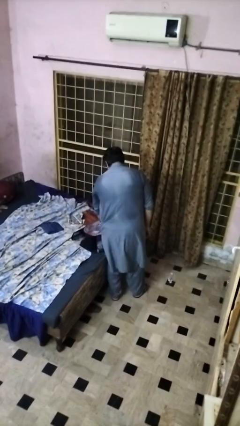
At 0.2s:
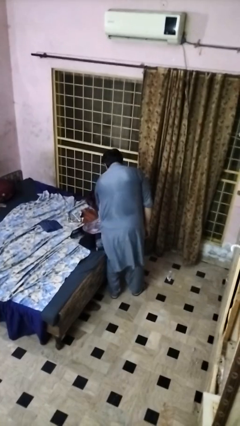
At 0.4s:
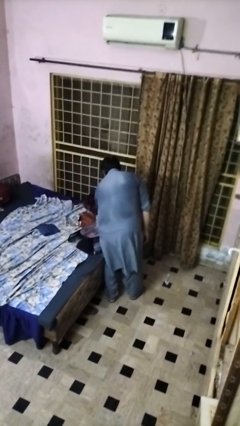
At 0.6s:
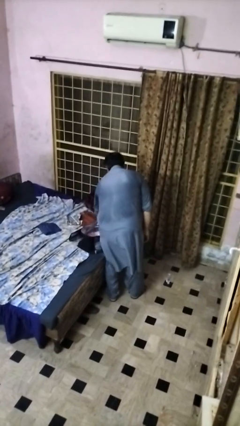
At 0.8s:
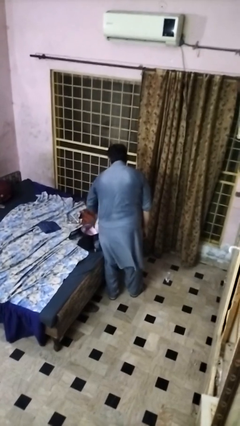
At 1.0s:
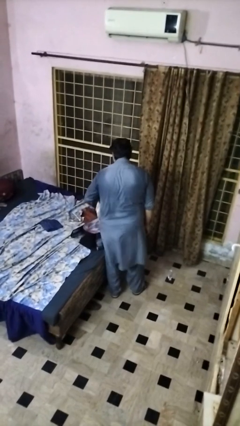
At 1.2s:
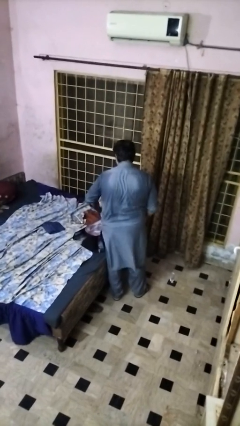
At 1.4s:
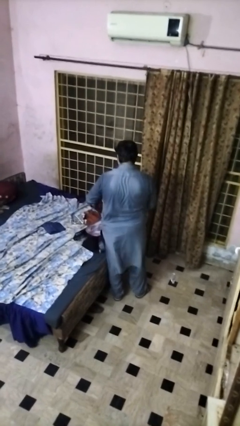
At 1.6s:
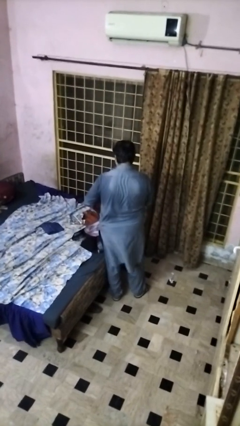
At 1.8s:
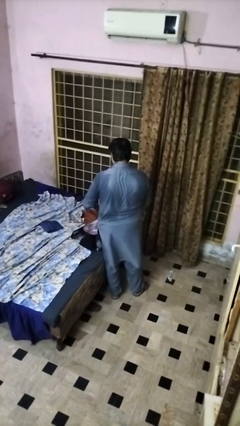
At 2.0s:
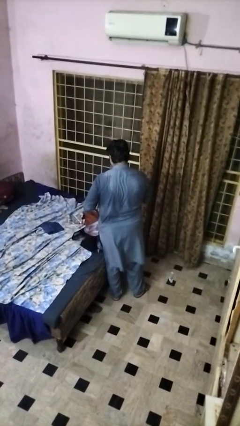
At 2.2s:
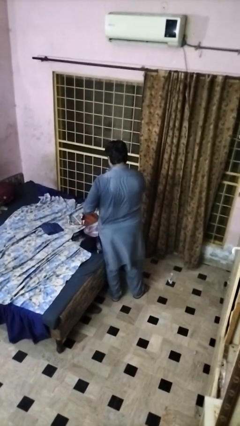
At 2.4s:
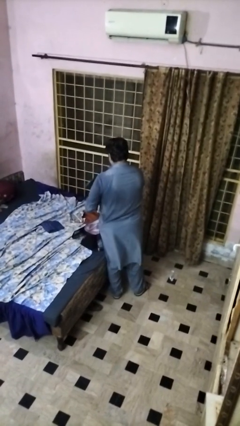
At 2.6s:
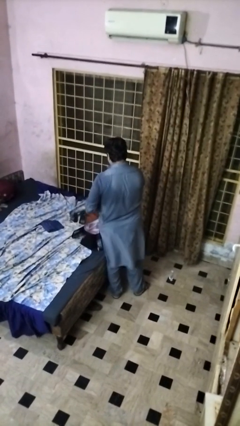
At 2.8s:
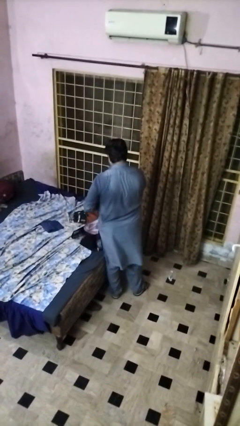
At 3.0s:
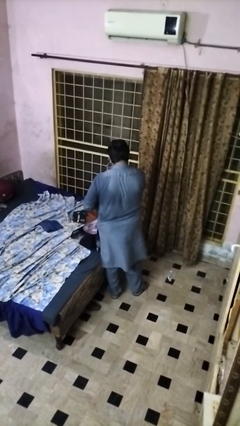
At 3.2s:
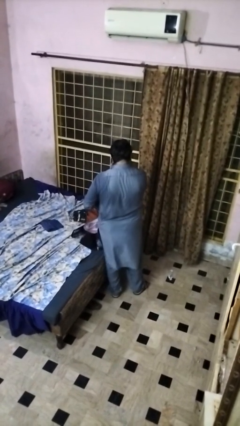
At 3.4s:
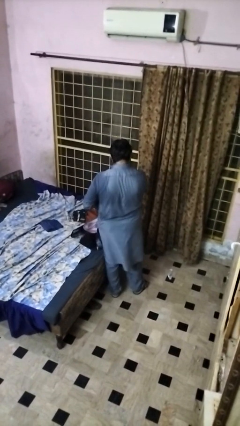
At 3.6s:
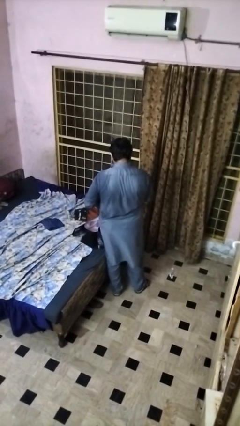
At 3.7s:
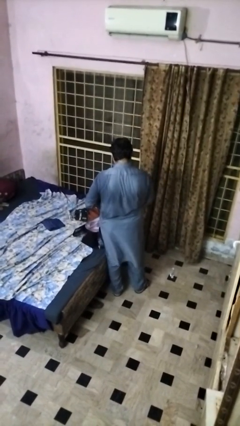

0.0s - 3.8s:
person unloads clothes from suitcase

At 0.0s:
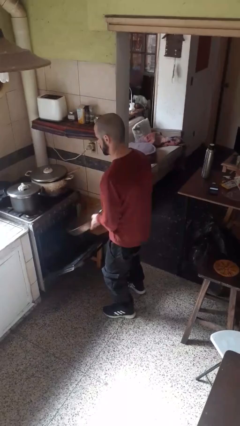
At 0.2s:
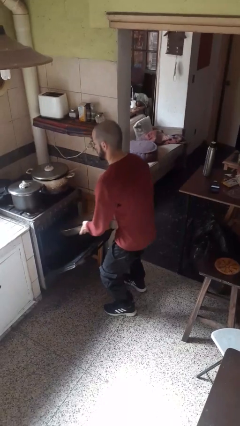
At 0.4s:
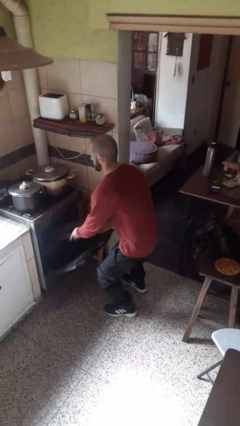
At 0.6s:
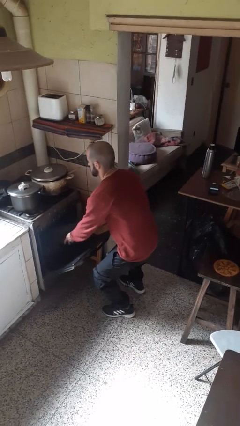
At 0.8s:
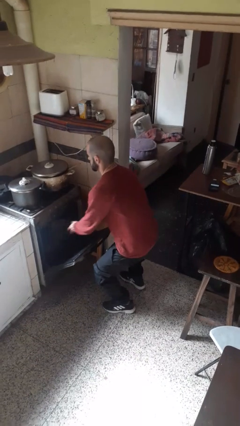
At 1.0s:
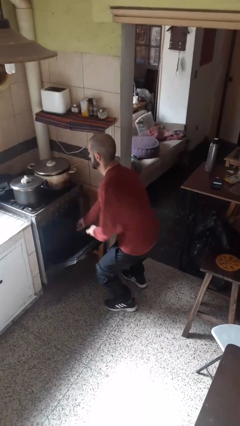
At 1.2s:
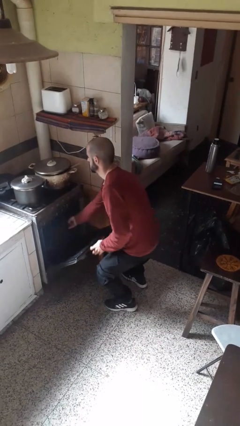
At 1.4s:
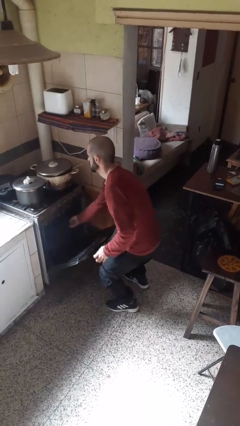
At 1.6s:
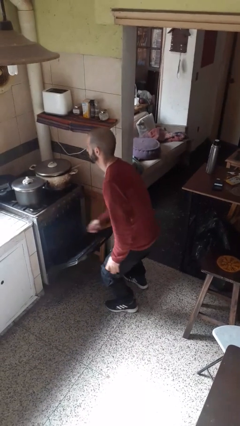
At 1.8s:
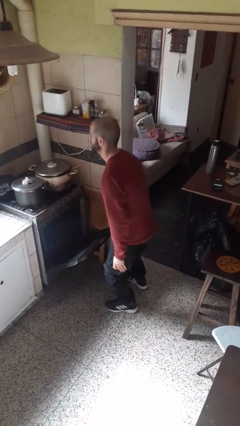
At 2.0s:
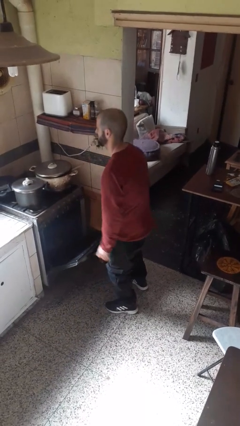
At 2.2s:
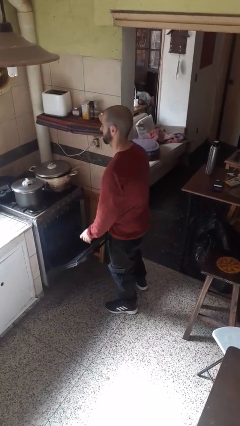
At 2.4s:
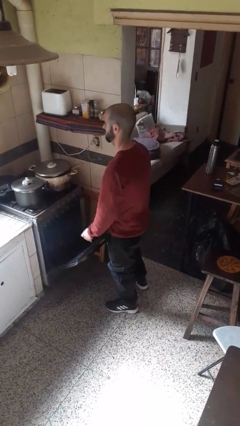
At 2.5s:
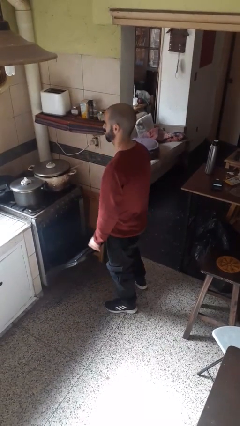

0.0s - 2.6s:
person puts object into oven

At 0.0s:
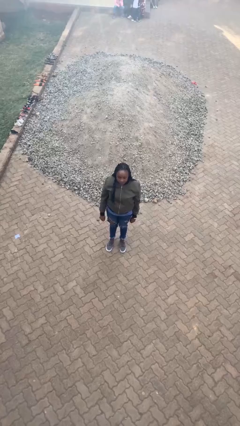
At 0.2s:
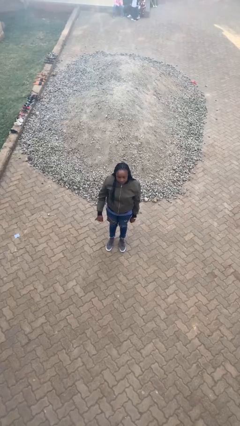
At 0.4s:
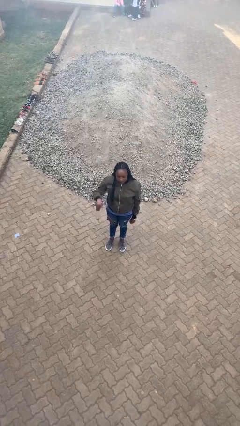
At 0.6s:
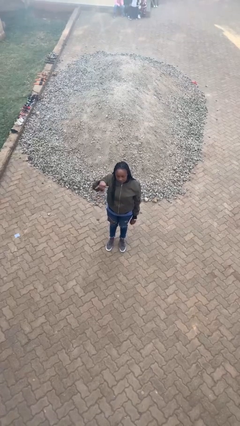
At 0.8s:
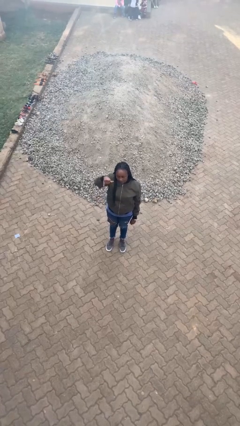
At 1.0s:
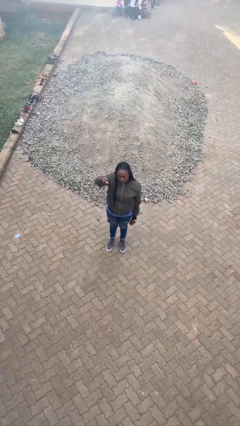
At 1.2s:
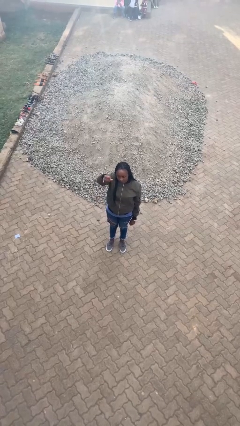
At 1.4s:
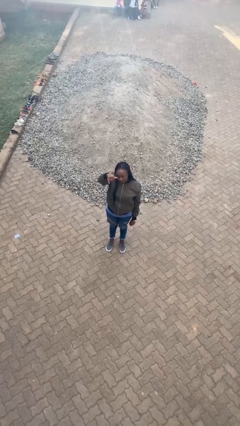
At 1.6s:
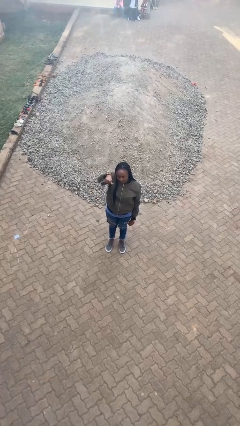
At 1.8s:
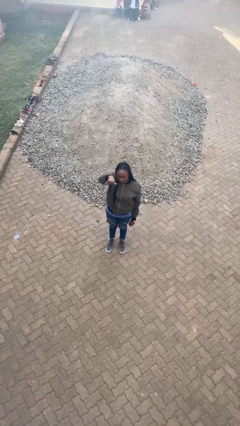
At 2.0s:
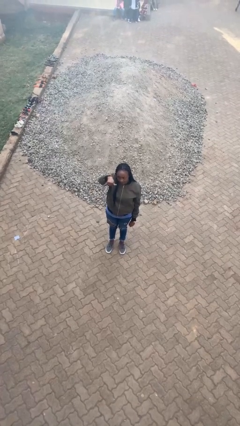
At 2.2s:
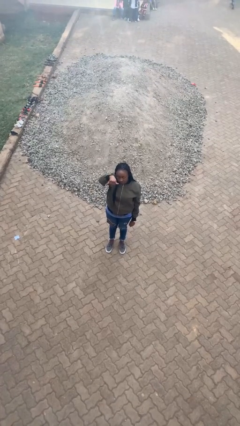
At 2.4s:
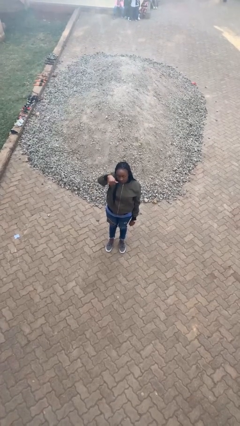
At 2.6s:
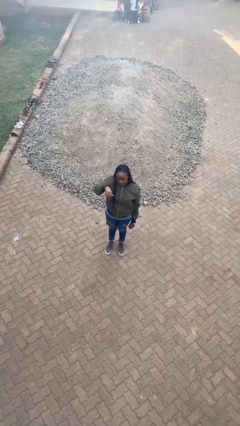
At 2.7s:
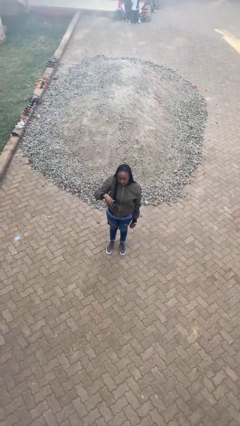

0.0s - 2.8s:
person gestures hang loose

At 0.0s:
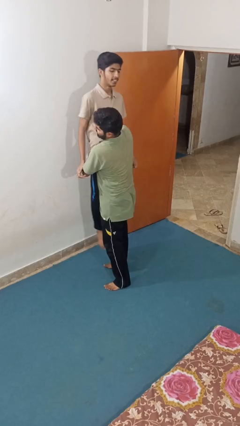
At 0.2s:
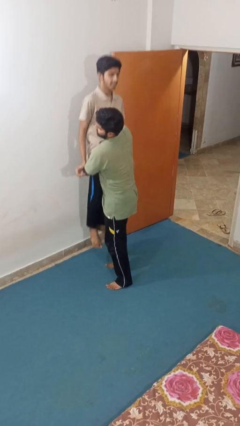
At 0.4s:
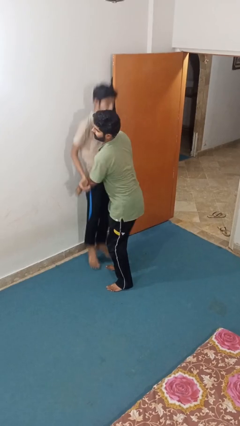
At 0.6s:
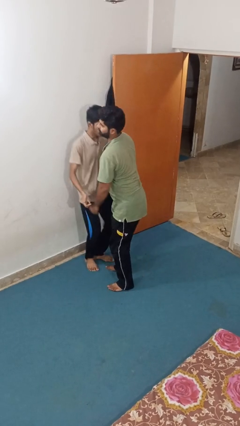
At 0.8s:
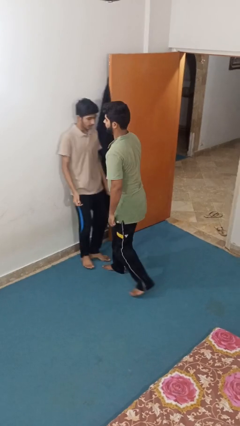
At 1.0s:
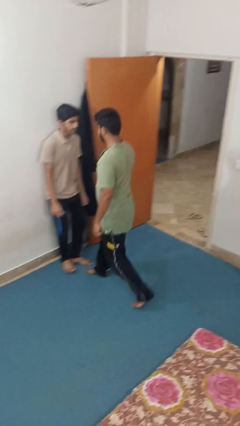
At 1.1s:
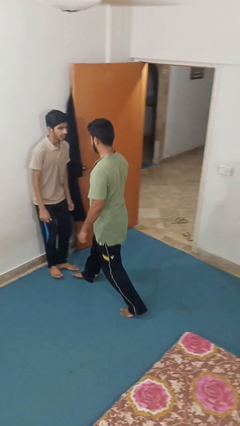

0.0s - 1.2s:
person puts down person

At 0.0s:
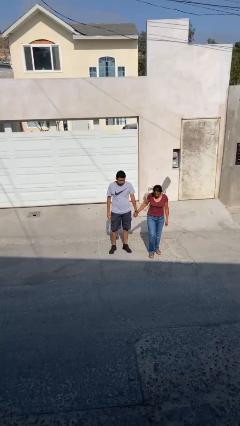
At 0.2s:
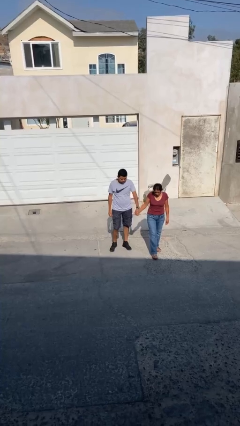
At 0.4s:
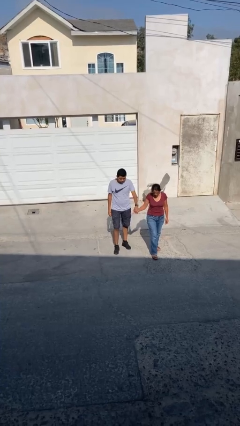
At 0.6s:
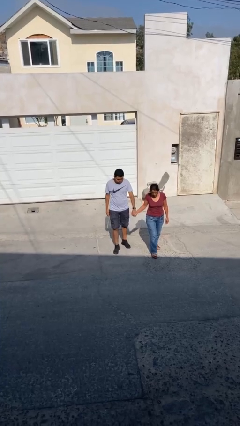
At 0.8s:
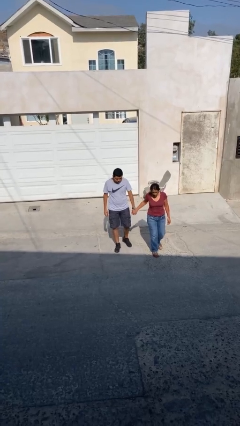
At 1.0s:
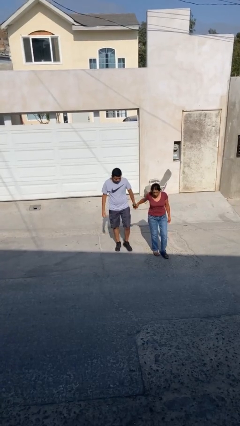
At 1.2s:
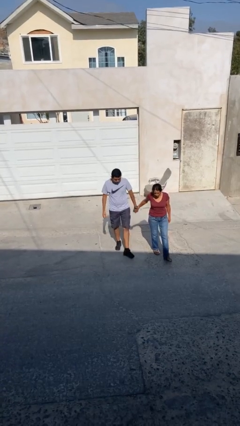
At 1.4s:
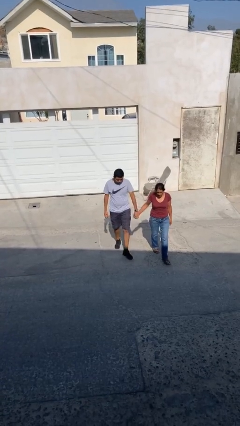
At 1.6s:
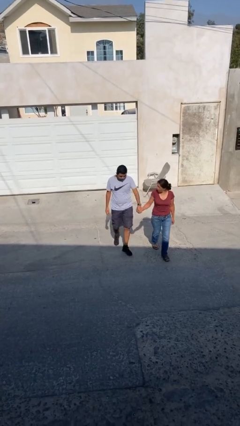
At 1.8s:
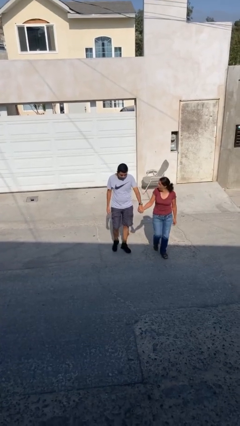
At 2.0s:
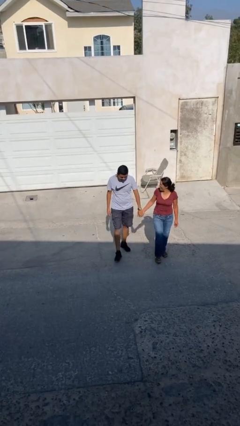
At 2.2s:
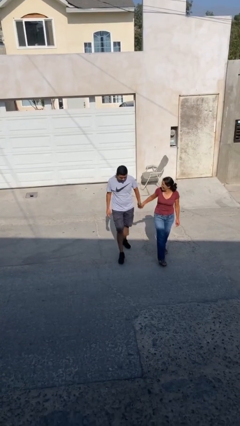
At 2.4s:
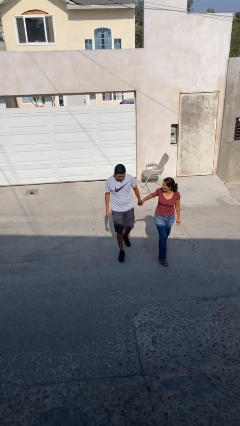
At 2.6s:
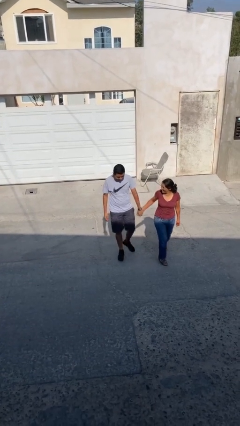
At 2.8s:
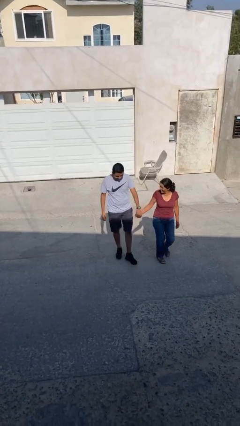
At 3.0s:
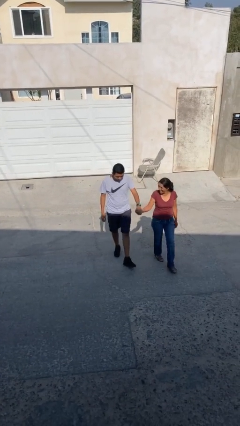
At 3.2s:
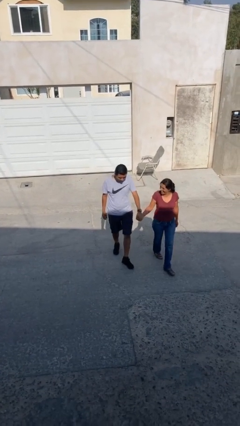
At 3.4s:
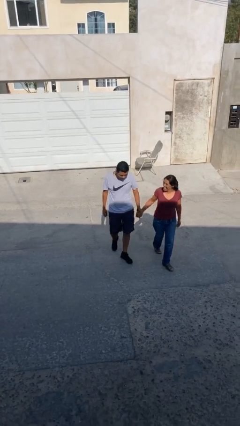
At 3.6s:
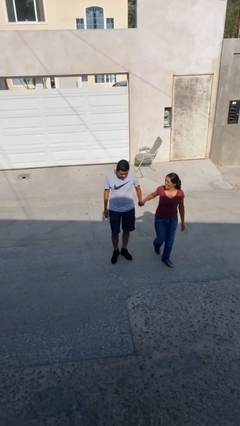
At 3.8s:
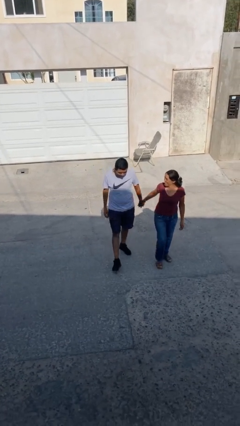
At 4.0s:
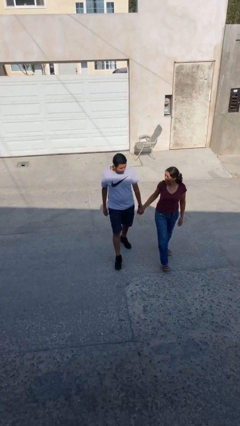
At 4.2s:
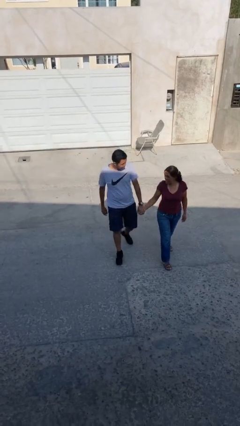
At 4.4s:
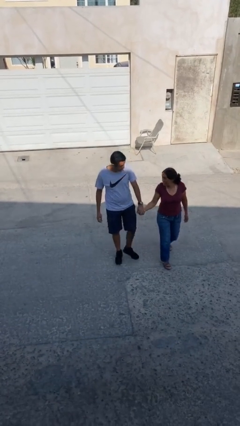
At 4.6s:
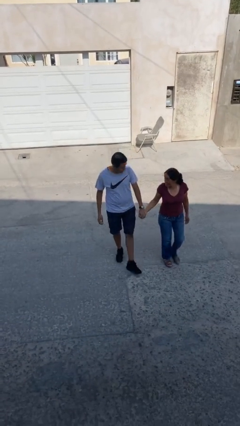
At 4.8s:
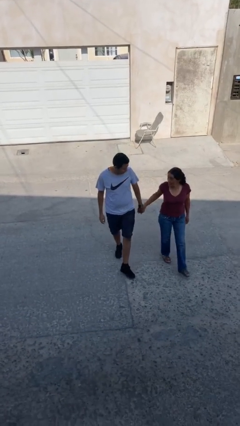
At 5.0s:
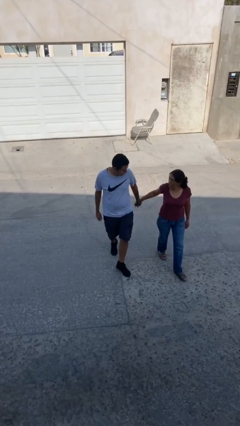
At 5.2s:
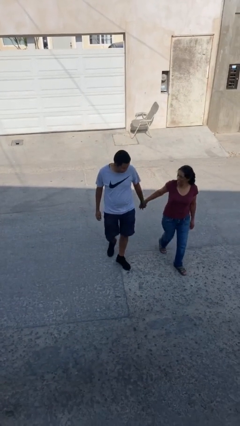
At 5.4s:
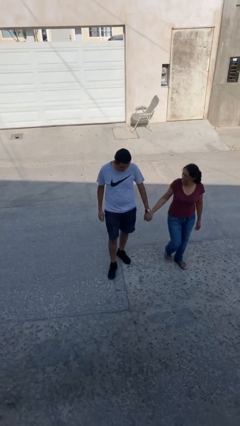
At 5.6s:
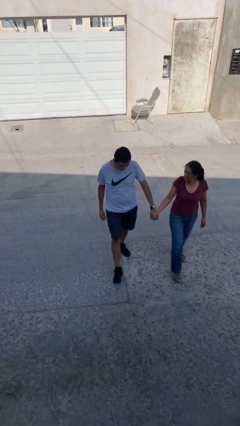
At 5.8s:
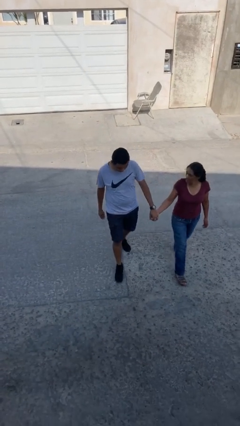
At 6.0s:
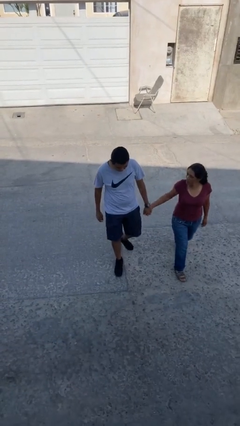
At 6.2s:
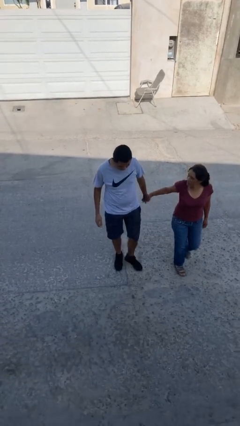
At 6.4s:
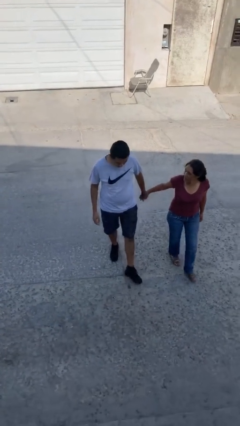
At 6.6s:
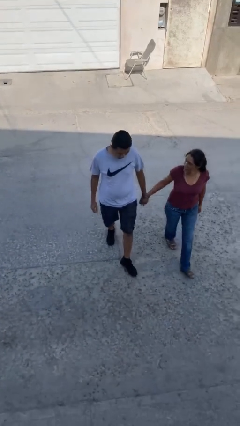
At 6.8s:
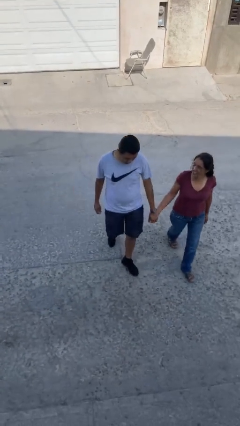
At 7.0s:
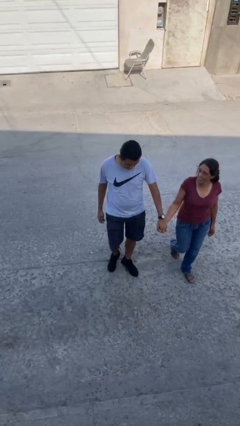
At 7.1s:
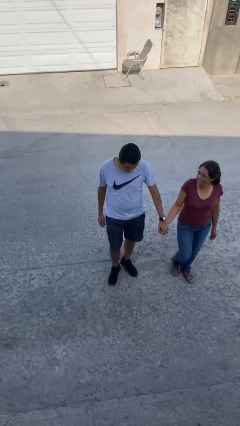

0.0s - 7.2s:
person holds hand
